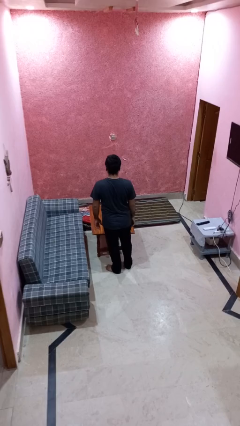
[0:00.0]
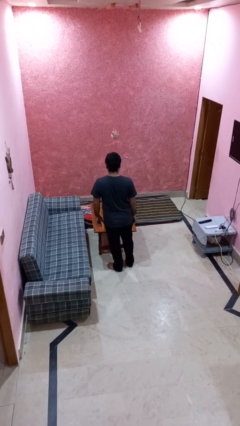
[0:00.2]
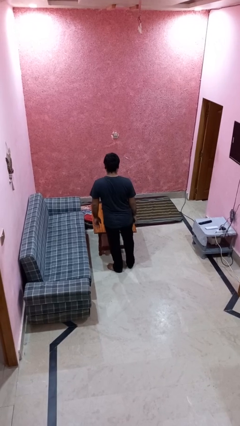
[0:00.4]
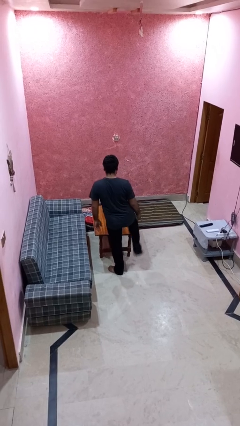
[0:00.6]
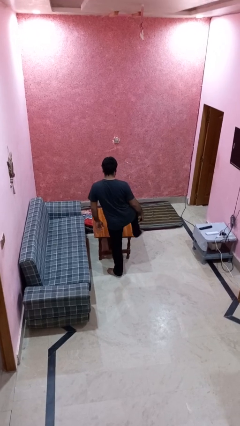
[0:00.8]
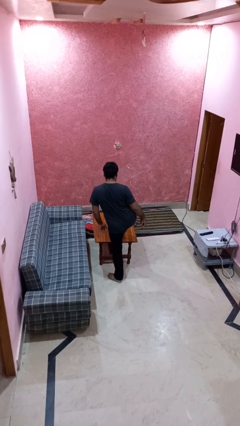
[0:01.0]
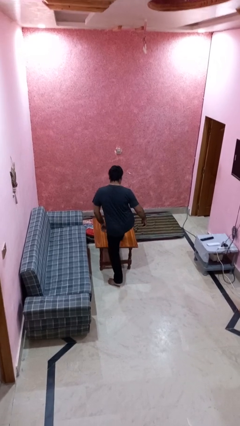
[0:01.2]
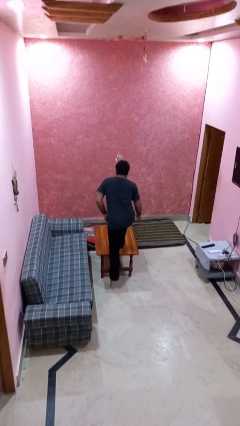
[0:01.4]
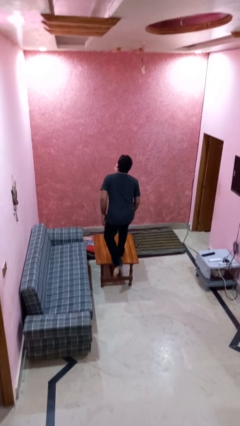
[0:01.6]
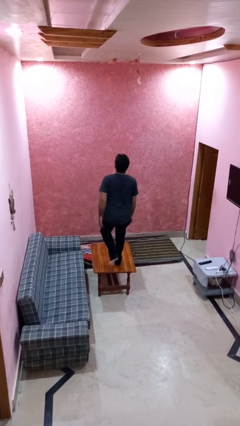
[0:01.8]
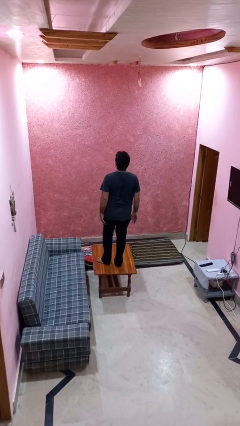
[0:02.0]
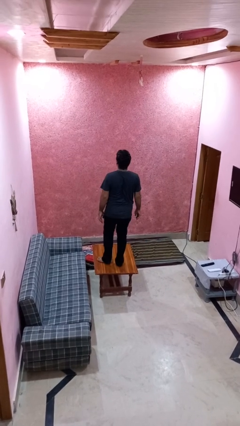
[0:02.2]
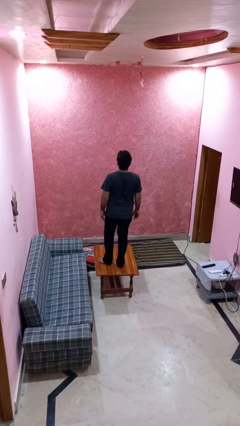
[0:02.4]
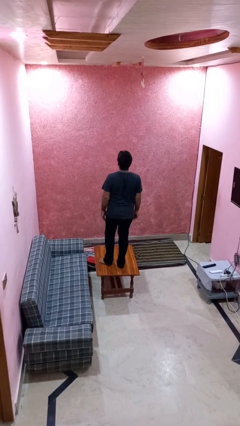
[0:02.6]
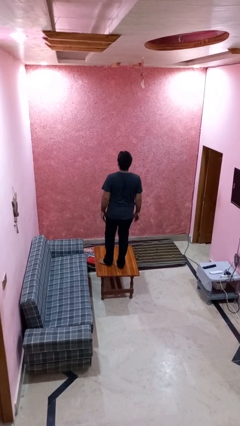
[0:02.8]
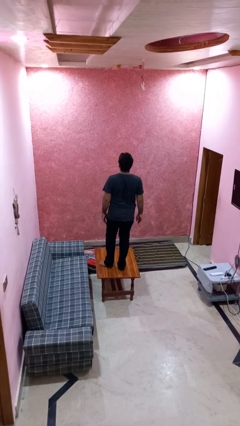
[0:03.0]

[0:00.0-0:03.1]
person climbs on table

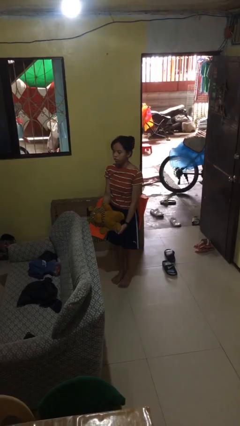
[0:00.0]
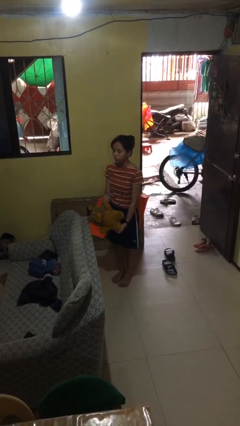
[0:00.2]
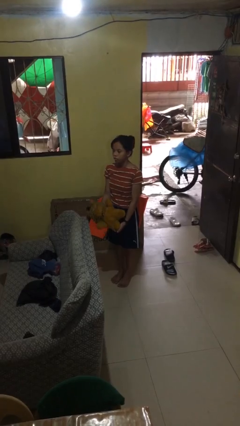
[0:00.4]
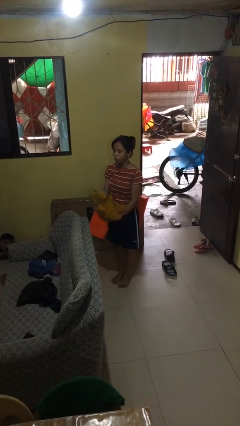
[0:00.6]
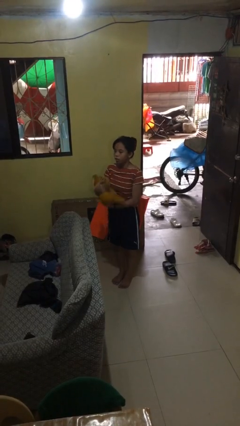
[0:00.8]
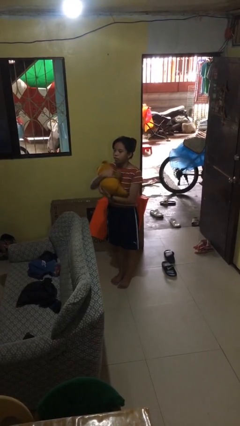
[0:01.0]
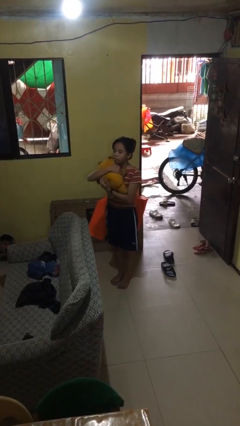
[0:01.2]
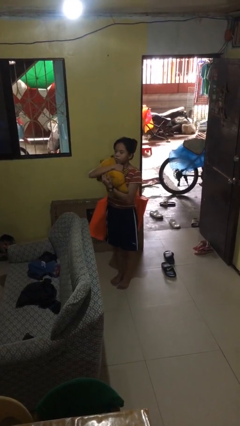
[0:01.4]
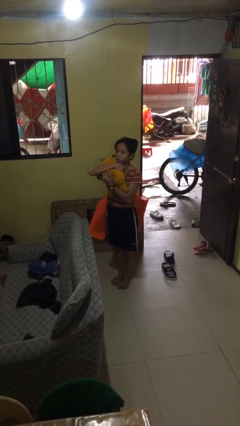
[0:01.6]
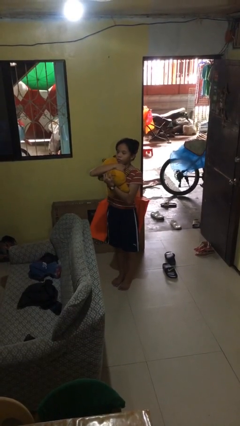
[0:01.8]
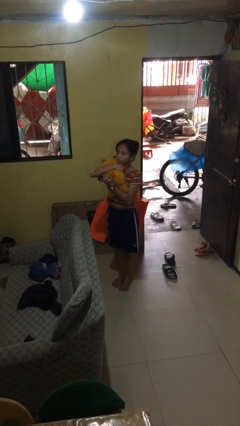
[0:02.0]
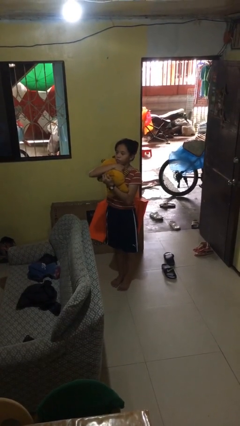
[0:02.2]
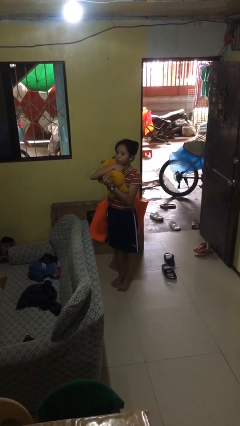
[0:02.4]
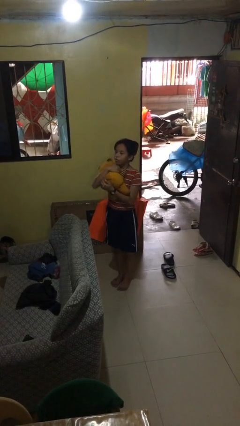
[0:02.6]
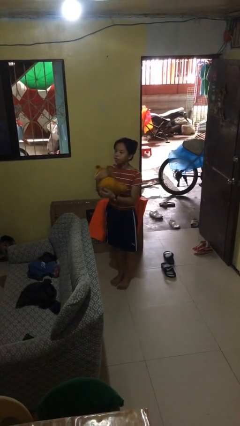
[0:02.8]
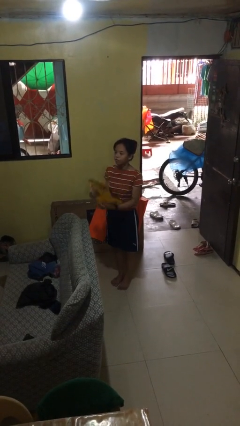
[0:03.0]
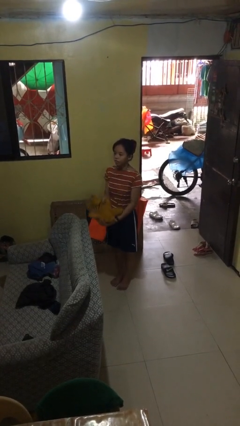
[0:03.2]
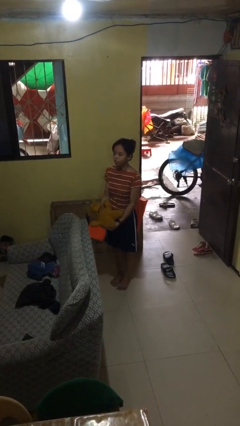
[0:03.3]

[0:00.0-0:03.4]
person hugs stuffed animal

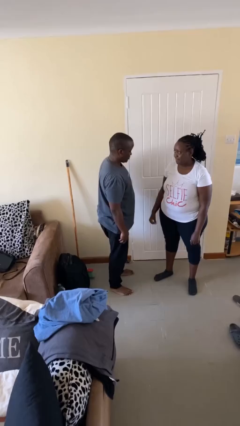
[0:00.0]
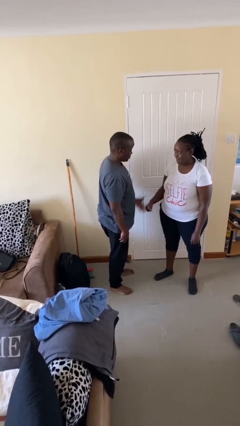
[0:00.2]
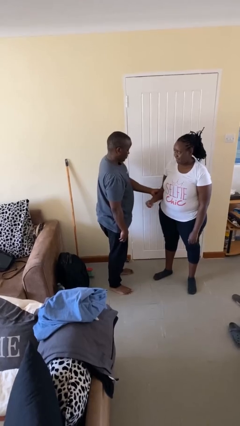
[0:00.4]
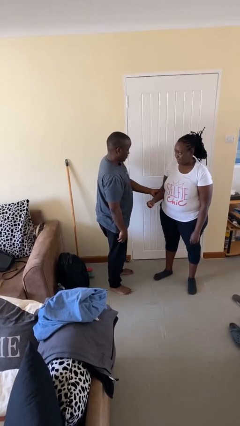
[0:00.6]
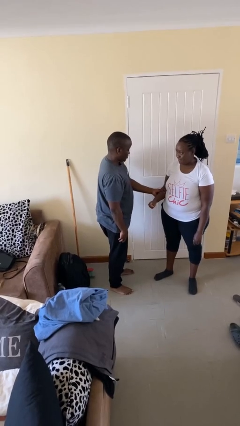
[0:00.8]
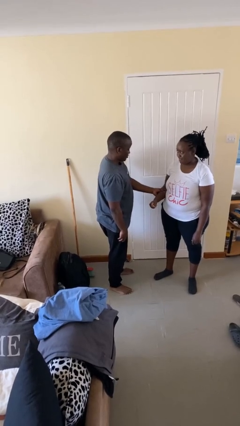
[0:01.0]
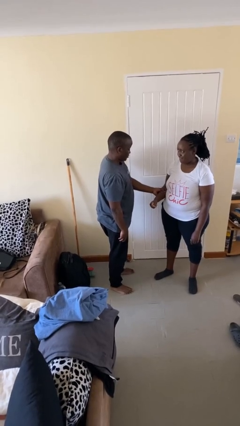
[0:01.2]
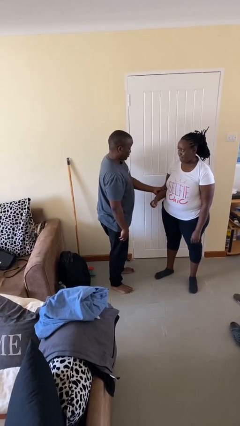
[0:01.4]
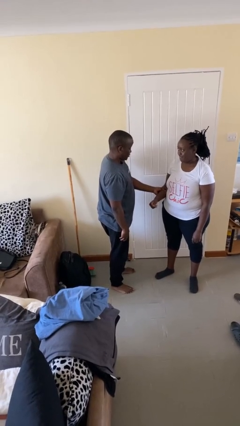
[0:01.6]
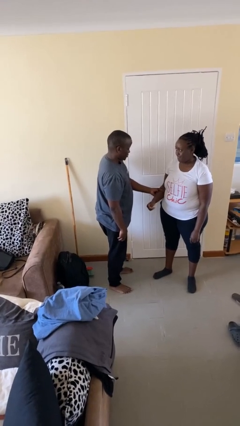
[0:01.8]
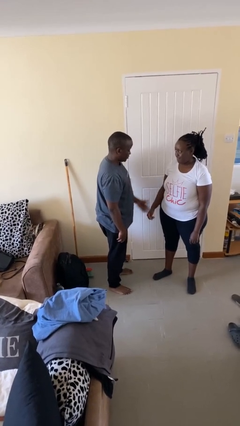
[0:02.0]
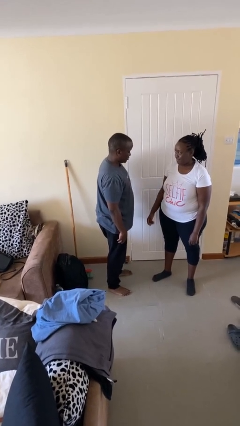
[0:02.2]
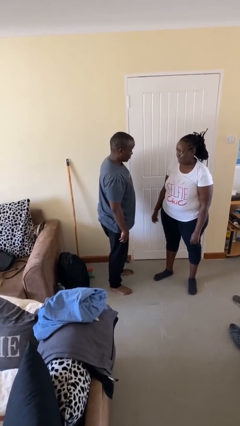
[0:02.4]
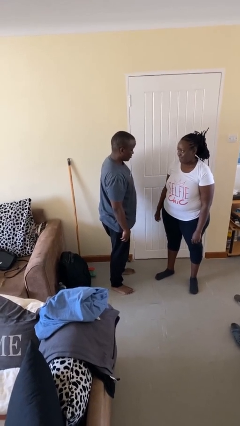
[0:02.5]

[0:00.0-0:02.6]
person grabs person by forearm

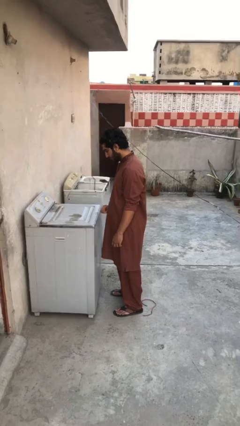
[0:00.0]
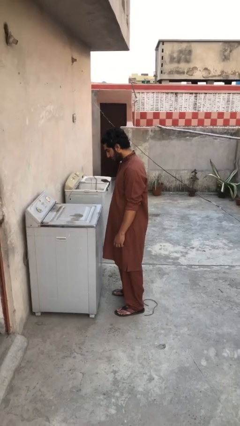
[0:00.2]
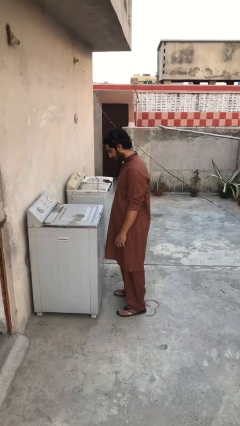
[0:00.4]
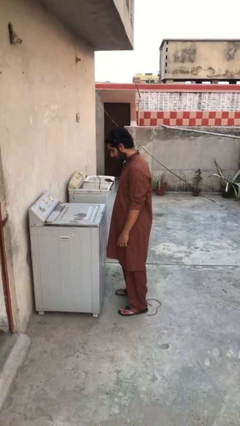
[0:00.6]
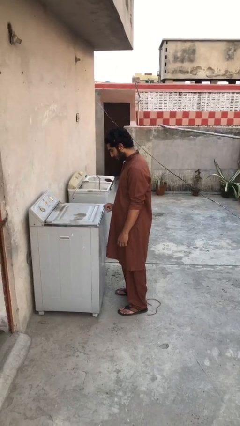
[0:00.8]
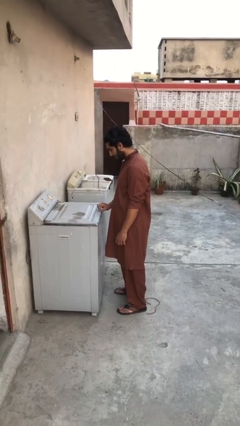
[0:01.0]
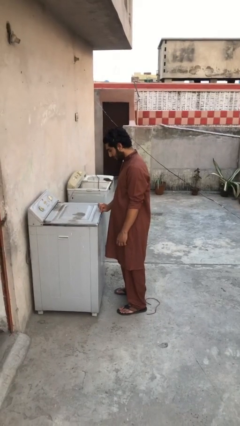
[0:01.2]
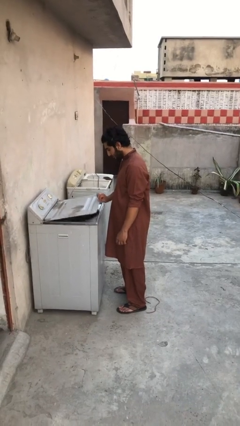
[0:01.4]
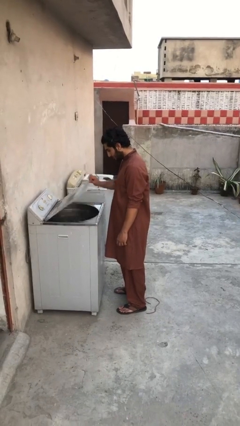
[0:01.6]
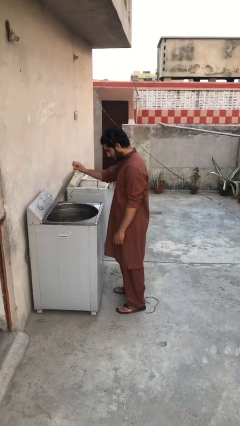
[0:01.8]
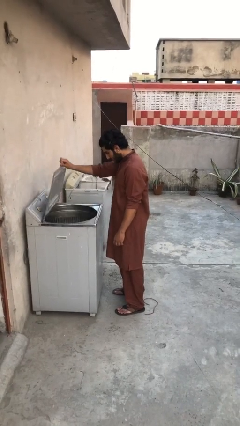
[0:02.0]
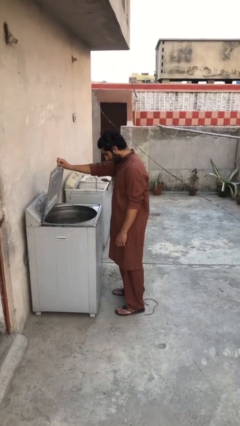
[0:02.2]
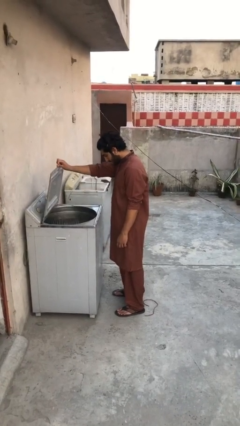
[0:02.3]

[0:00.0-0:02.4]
person opens clothes washer

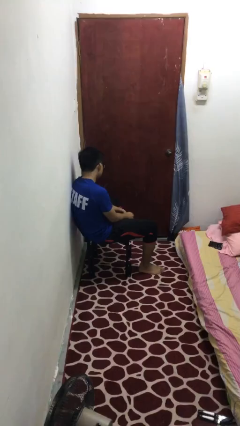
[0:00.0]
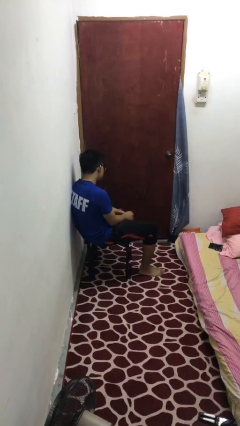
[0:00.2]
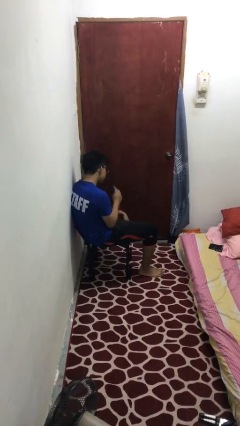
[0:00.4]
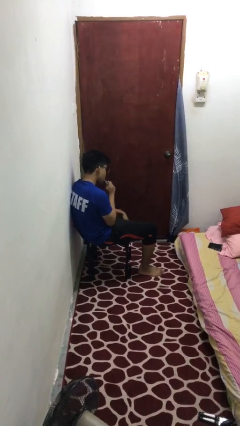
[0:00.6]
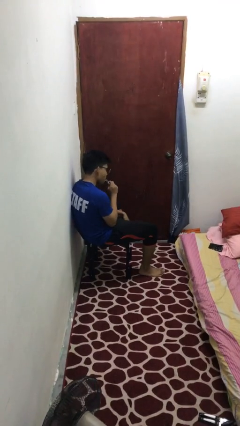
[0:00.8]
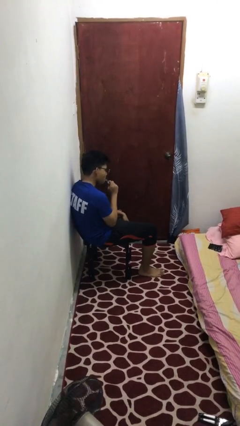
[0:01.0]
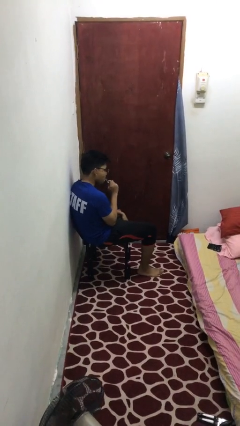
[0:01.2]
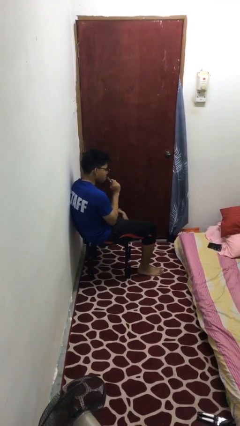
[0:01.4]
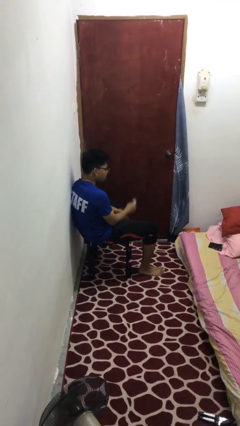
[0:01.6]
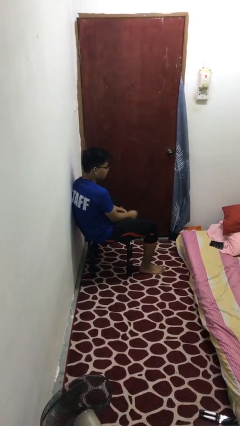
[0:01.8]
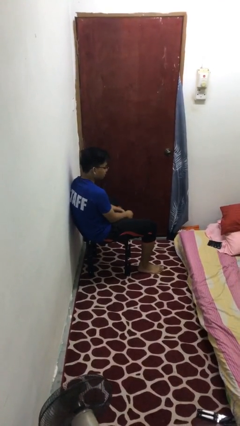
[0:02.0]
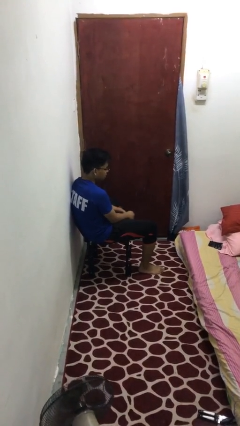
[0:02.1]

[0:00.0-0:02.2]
person vapes

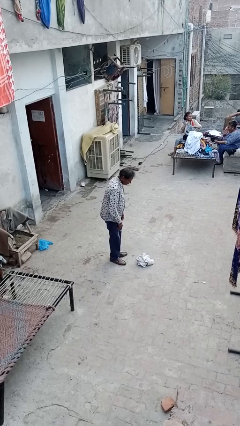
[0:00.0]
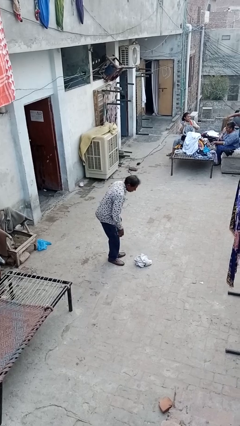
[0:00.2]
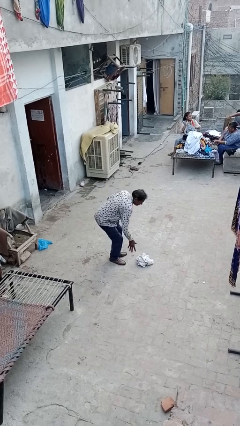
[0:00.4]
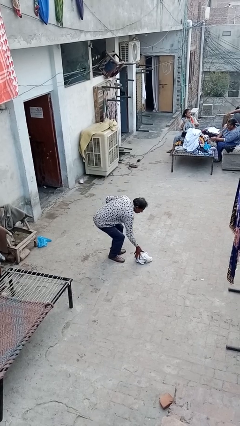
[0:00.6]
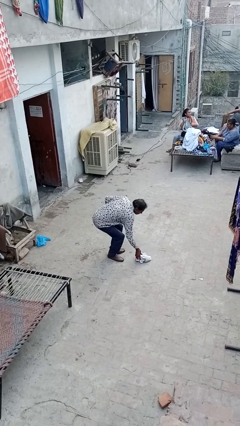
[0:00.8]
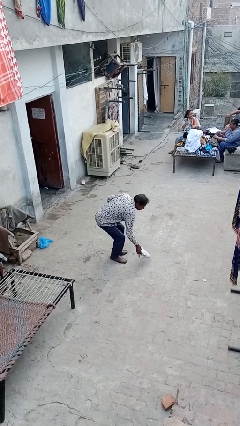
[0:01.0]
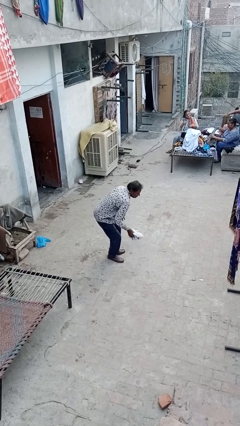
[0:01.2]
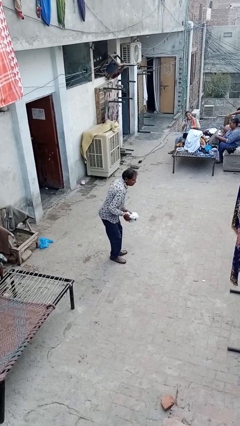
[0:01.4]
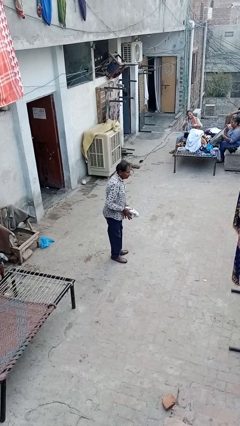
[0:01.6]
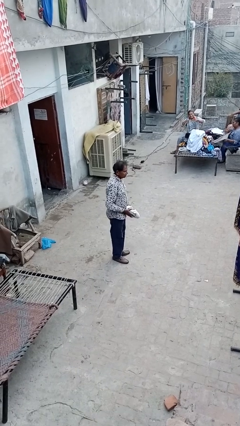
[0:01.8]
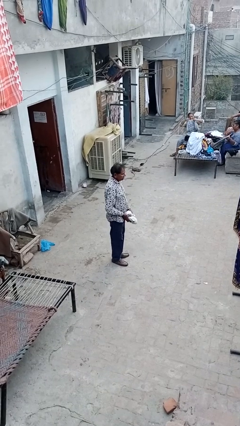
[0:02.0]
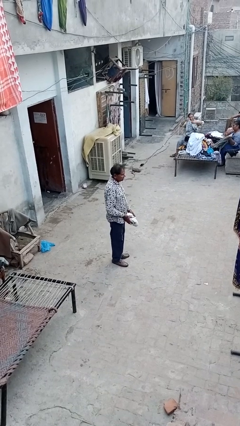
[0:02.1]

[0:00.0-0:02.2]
person picks up object from floor

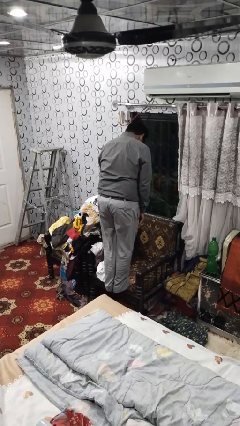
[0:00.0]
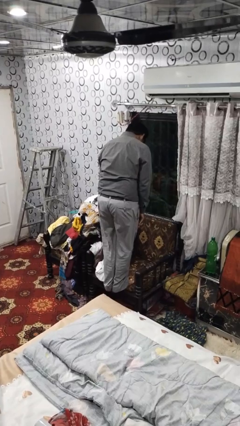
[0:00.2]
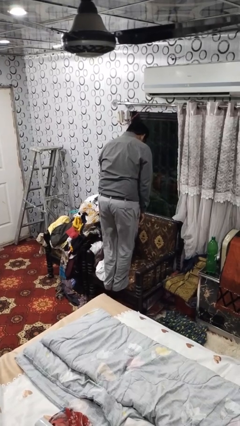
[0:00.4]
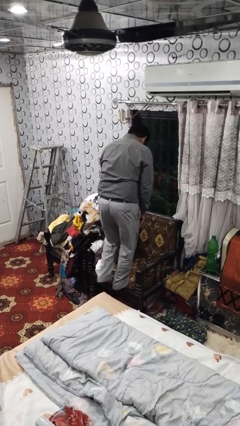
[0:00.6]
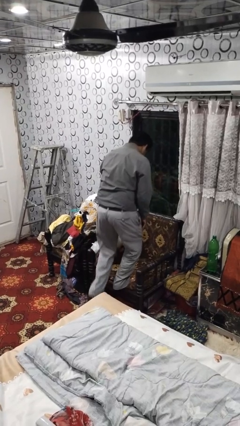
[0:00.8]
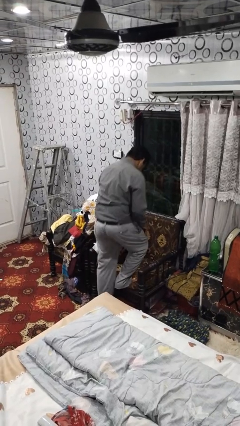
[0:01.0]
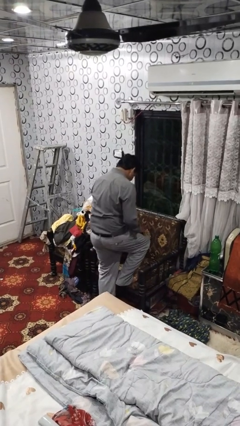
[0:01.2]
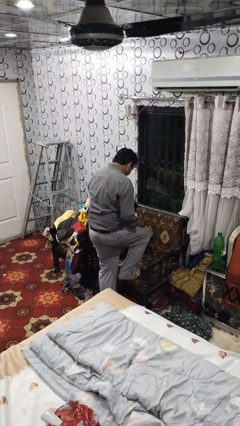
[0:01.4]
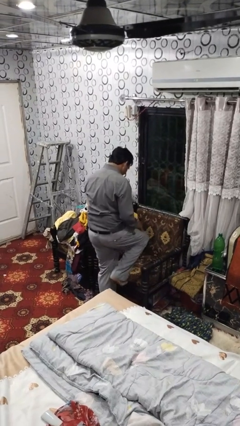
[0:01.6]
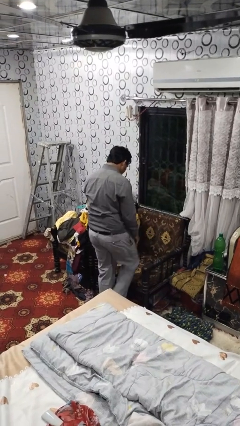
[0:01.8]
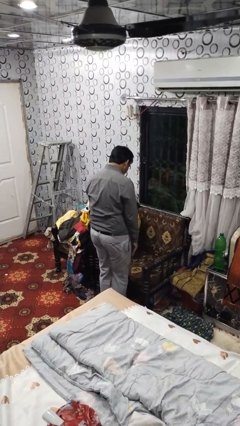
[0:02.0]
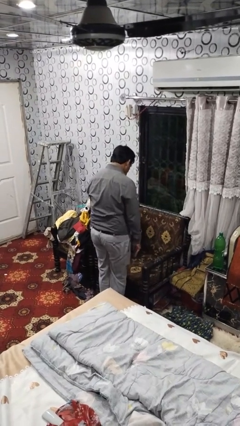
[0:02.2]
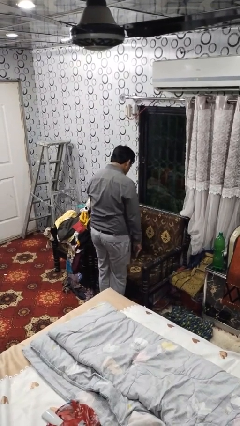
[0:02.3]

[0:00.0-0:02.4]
person climbs off couch
